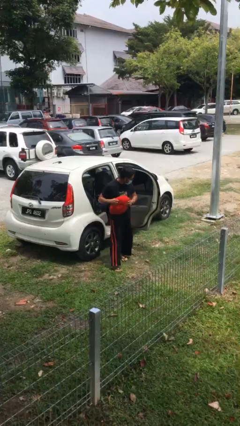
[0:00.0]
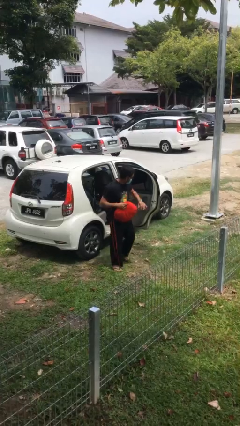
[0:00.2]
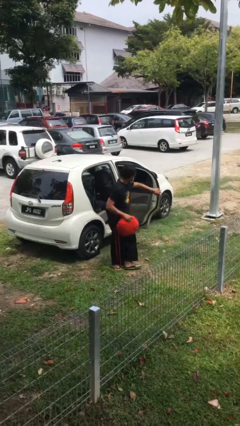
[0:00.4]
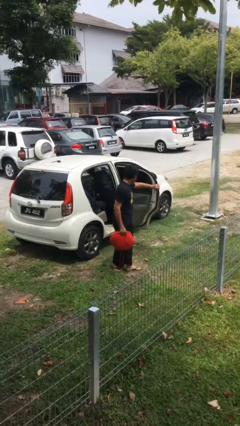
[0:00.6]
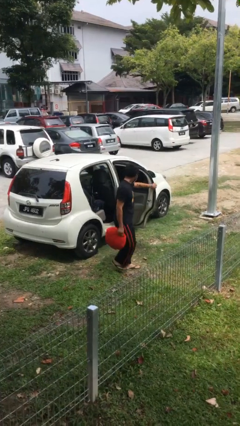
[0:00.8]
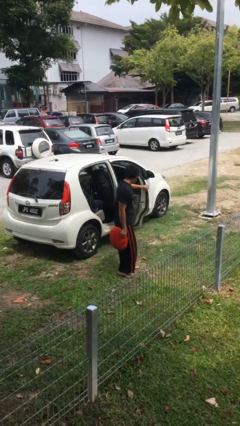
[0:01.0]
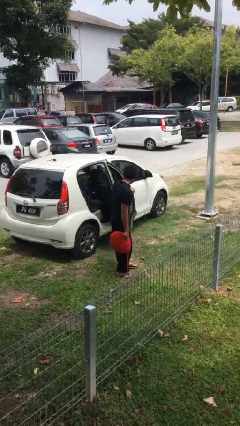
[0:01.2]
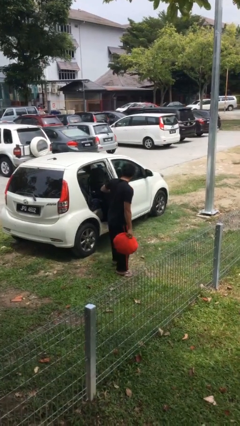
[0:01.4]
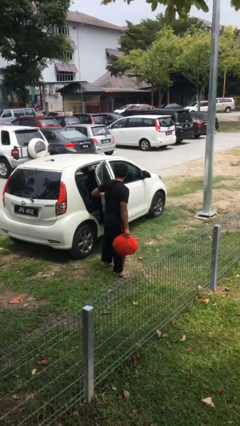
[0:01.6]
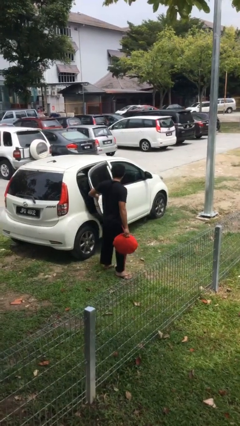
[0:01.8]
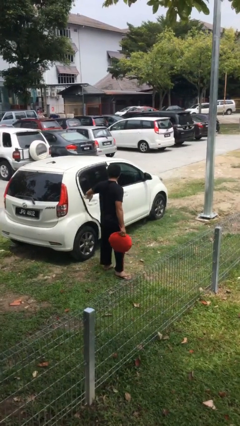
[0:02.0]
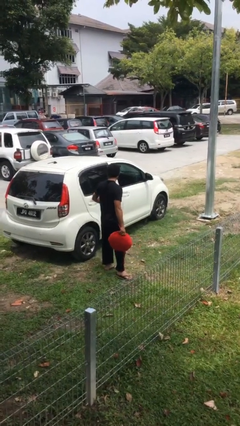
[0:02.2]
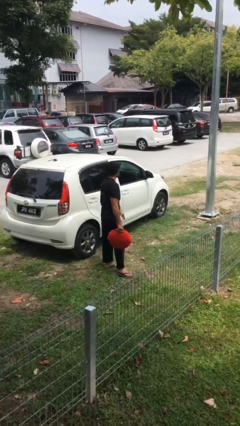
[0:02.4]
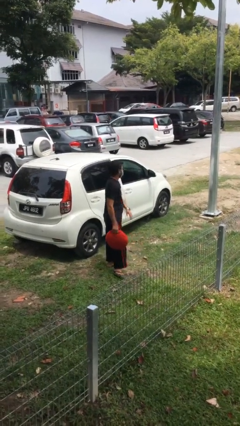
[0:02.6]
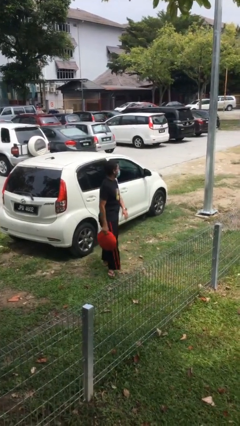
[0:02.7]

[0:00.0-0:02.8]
person closes car door

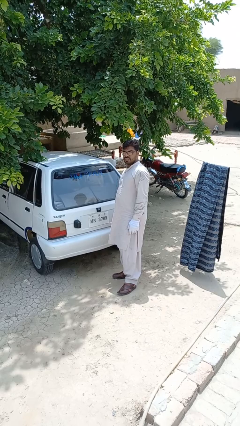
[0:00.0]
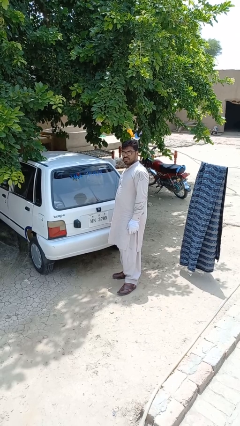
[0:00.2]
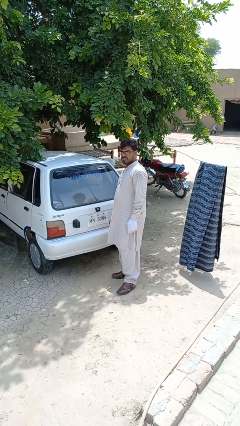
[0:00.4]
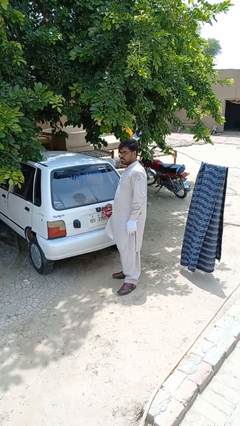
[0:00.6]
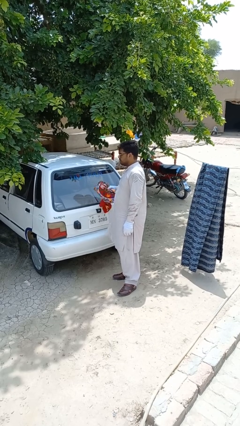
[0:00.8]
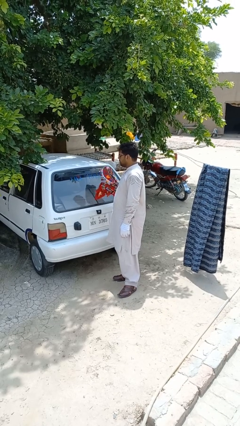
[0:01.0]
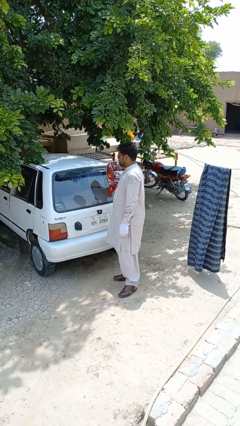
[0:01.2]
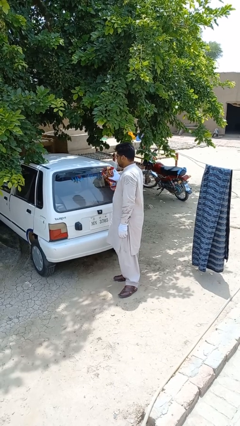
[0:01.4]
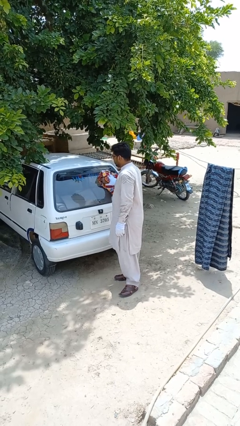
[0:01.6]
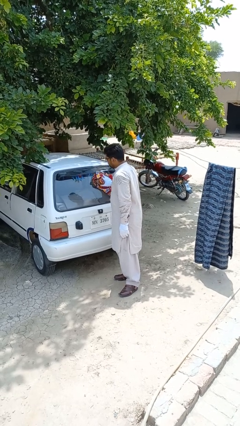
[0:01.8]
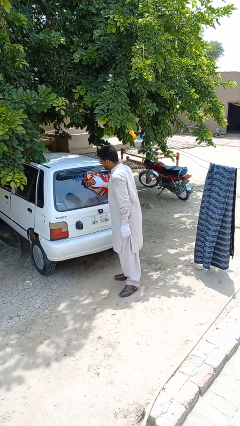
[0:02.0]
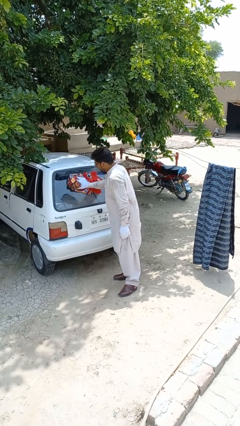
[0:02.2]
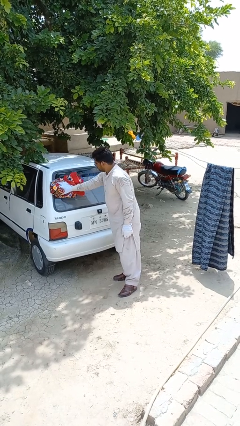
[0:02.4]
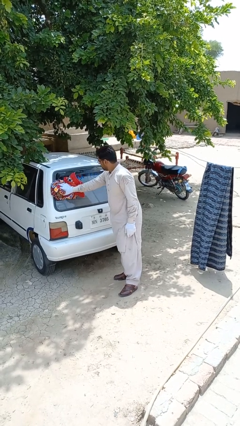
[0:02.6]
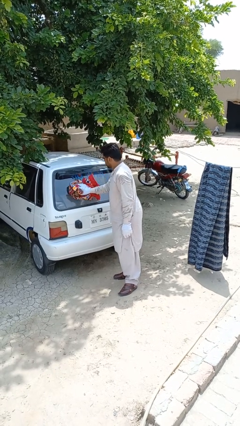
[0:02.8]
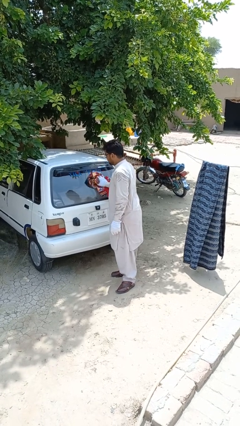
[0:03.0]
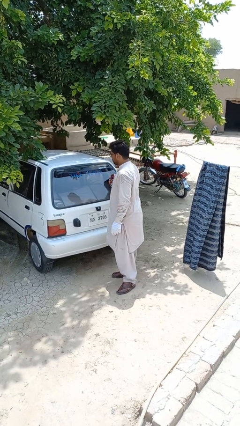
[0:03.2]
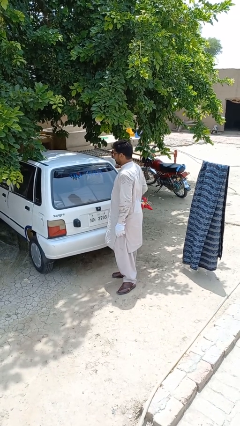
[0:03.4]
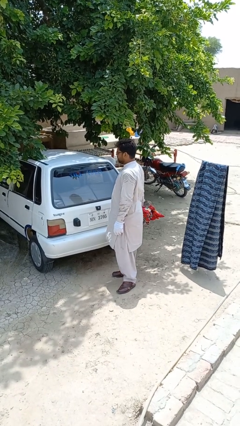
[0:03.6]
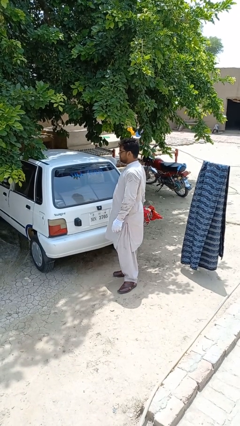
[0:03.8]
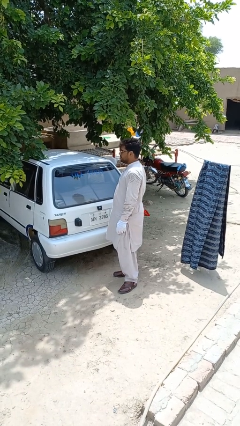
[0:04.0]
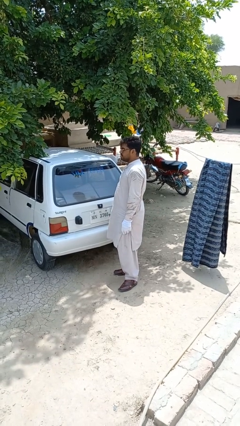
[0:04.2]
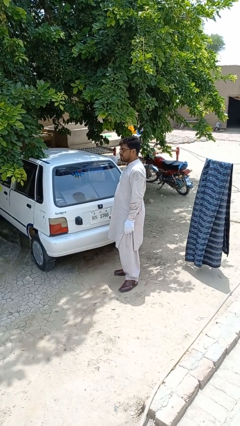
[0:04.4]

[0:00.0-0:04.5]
person polishes car with rag

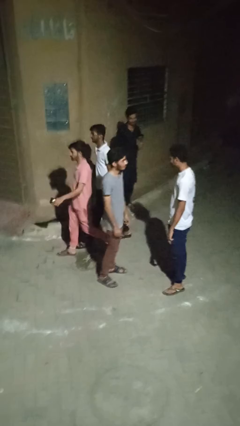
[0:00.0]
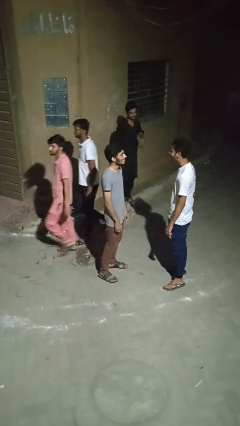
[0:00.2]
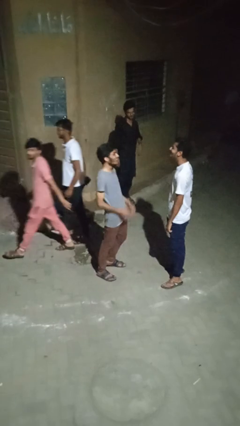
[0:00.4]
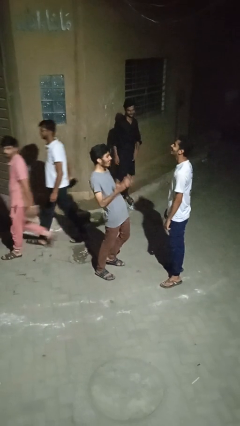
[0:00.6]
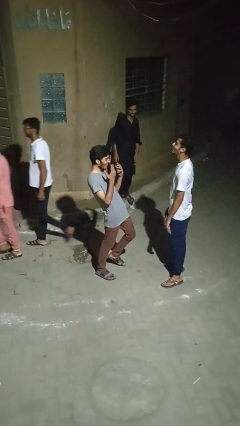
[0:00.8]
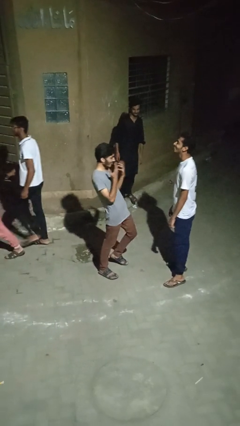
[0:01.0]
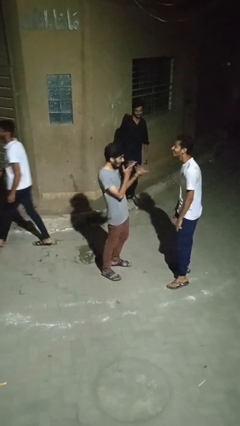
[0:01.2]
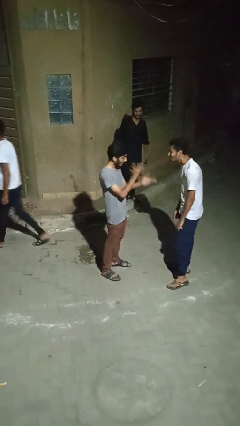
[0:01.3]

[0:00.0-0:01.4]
person laughs with person

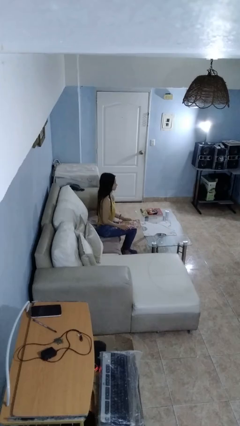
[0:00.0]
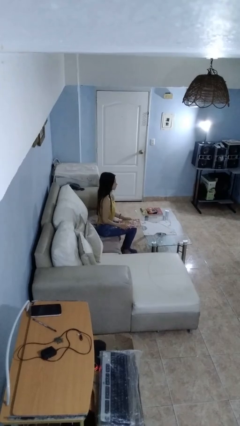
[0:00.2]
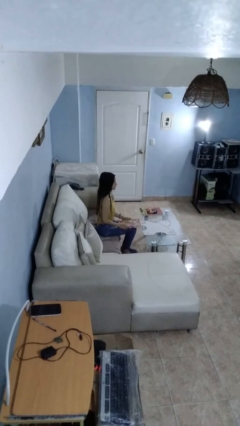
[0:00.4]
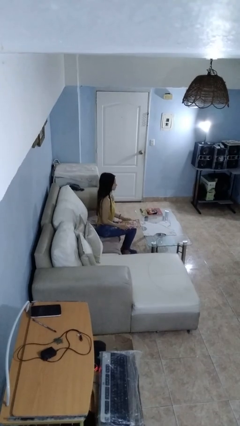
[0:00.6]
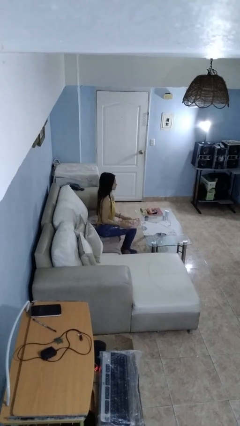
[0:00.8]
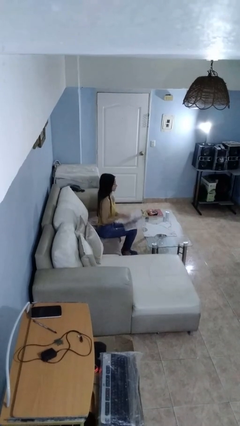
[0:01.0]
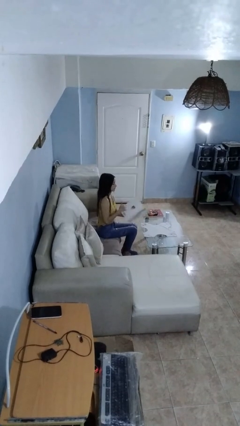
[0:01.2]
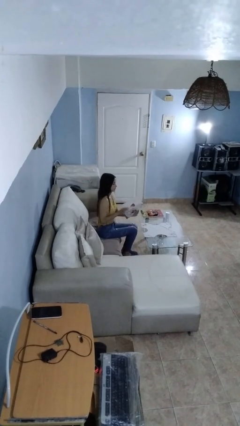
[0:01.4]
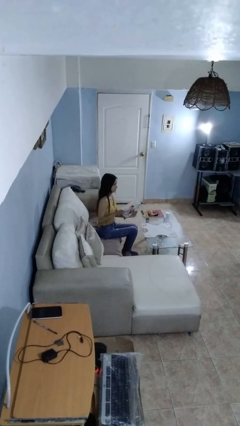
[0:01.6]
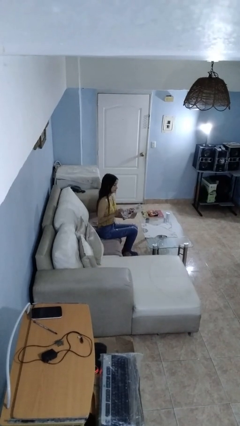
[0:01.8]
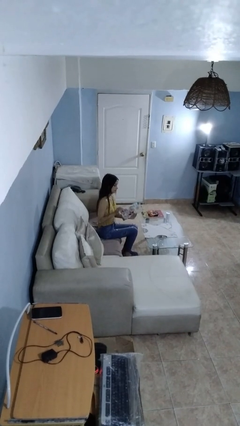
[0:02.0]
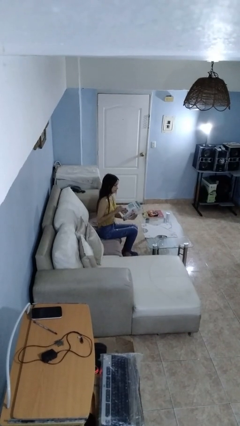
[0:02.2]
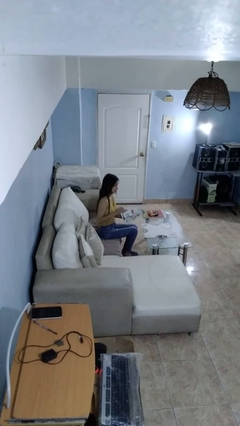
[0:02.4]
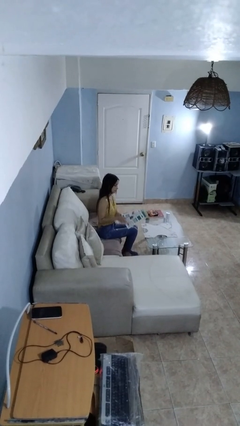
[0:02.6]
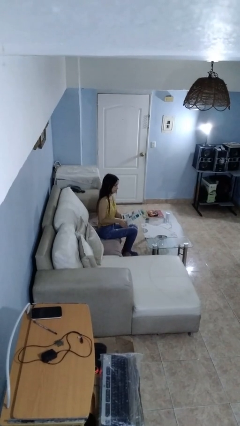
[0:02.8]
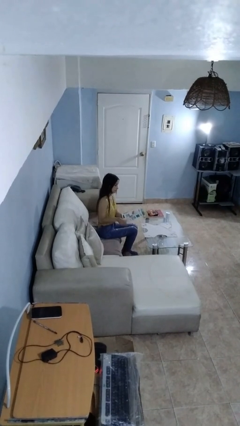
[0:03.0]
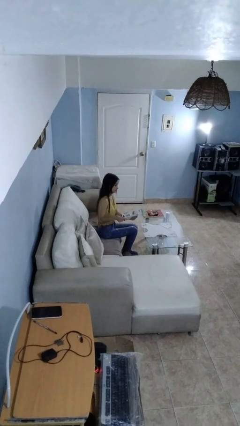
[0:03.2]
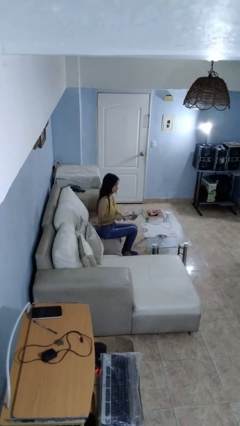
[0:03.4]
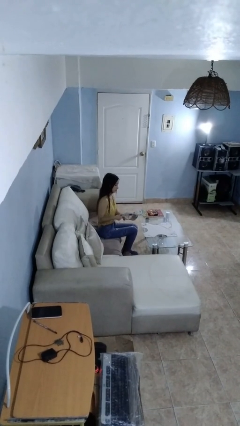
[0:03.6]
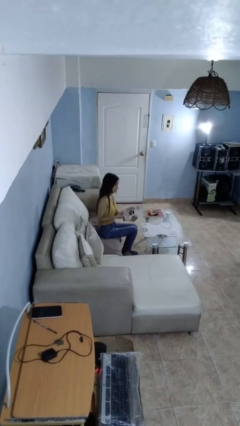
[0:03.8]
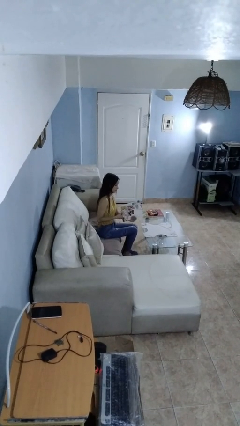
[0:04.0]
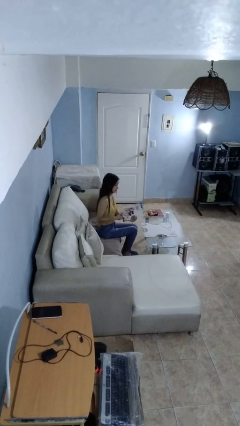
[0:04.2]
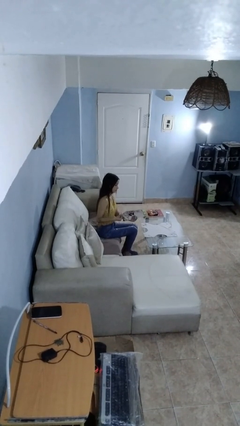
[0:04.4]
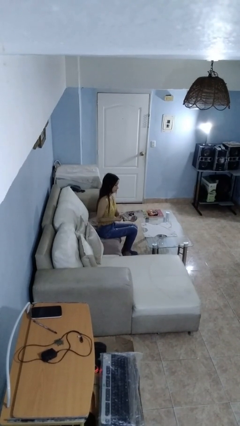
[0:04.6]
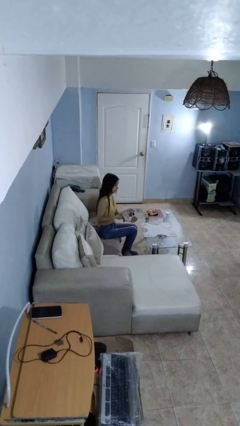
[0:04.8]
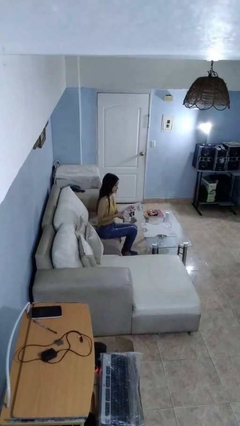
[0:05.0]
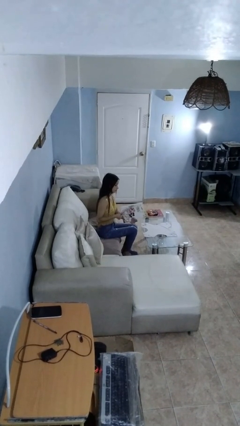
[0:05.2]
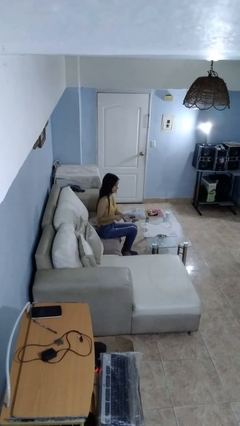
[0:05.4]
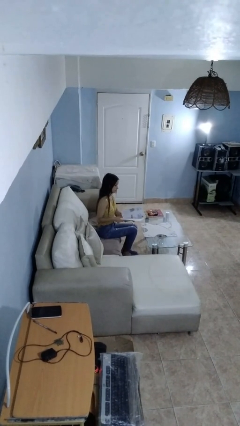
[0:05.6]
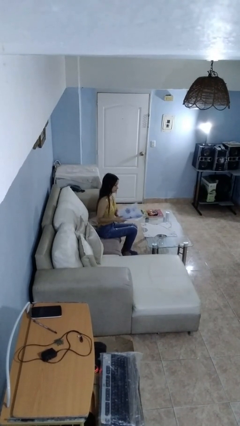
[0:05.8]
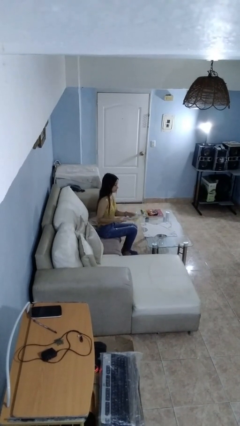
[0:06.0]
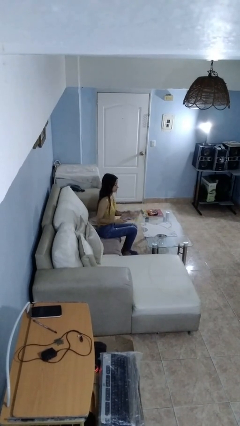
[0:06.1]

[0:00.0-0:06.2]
person reads magazine

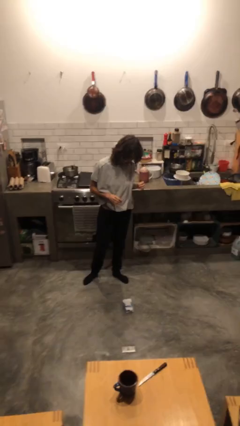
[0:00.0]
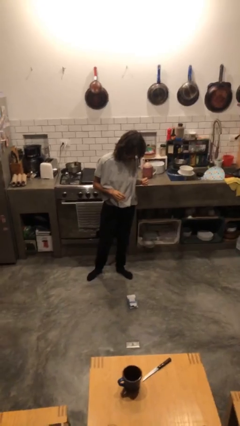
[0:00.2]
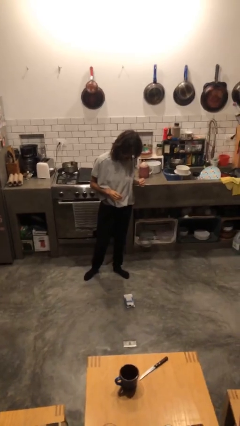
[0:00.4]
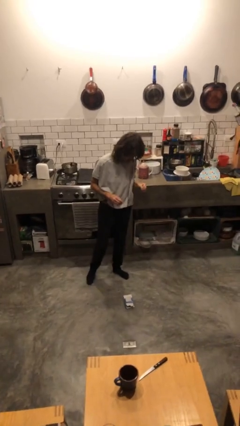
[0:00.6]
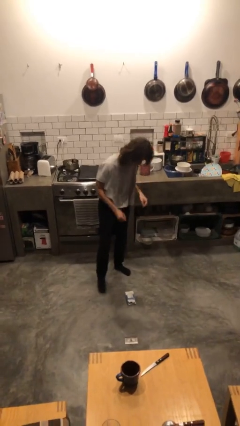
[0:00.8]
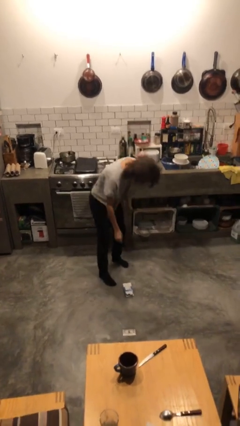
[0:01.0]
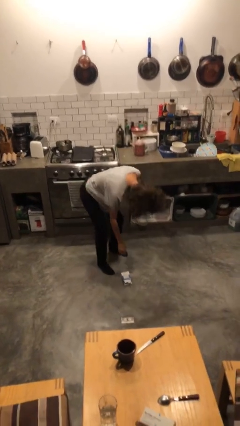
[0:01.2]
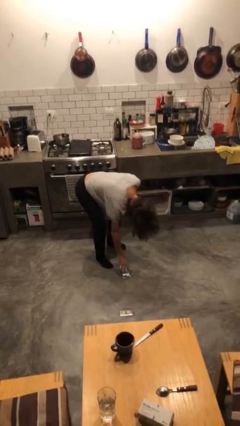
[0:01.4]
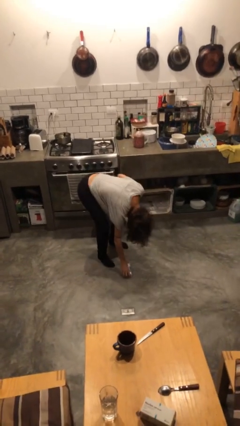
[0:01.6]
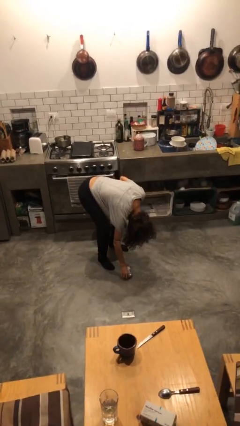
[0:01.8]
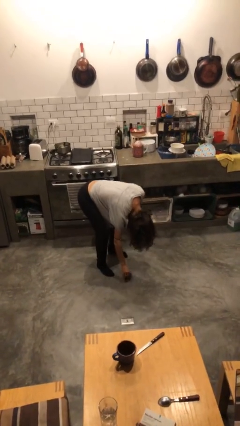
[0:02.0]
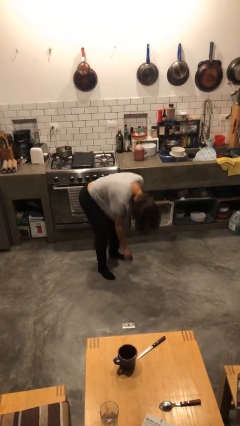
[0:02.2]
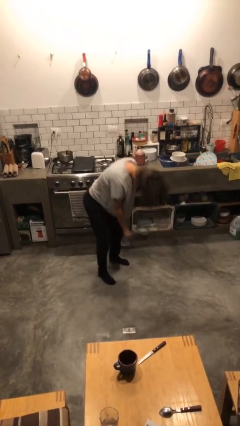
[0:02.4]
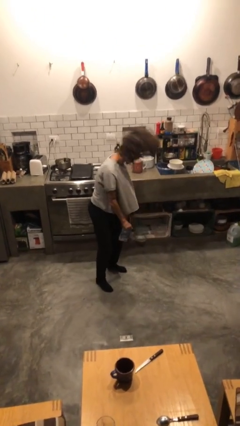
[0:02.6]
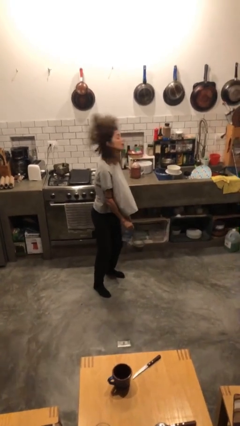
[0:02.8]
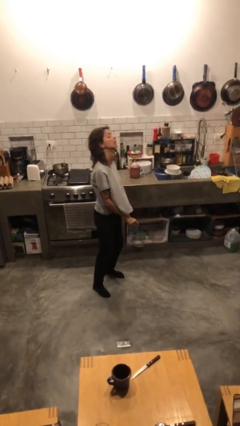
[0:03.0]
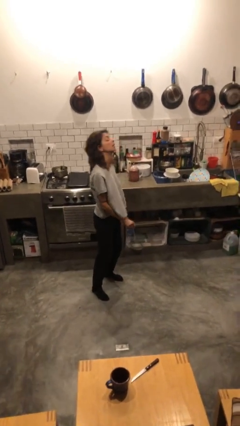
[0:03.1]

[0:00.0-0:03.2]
person picks up object from floor
